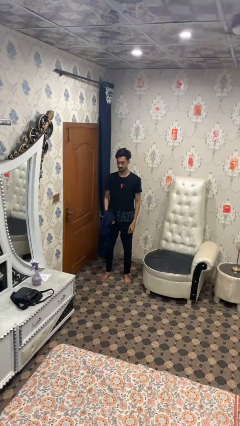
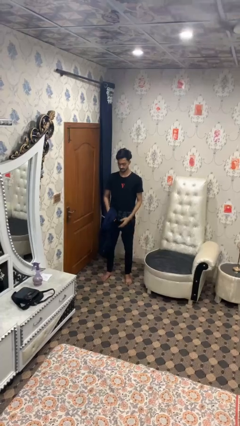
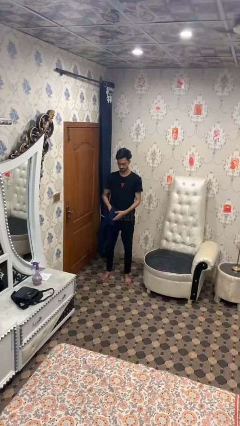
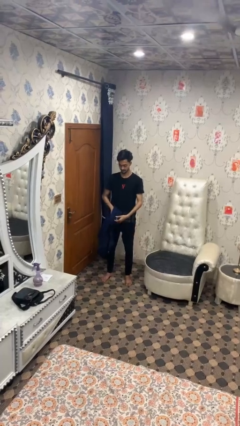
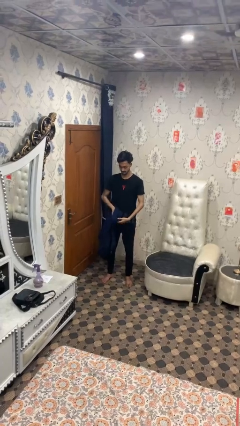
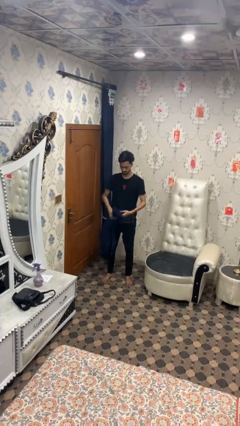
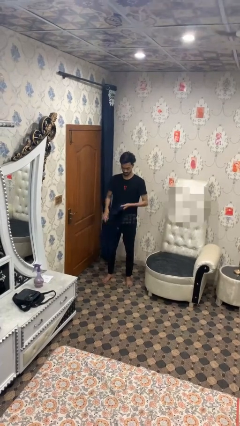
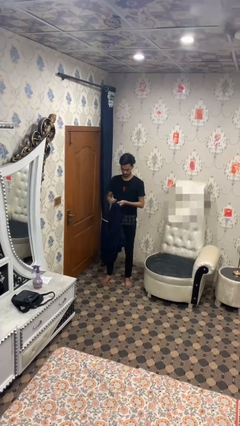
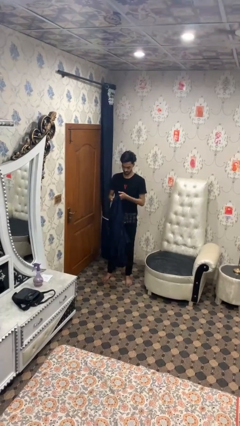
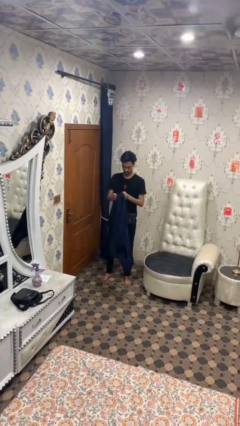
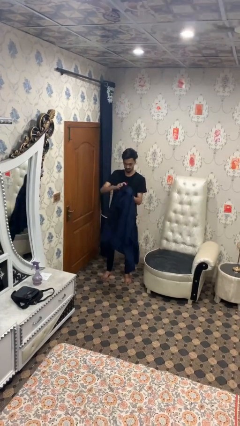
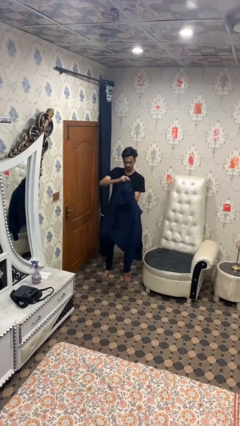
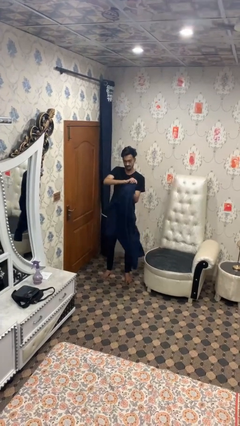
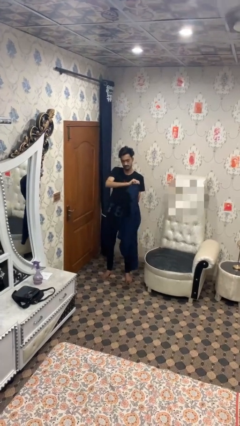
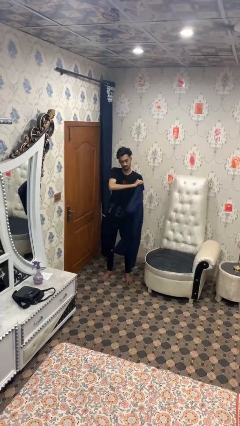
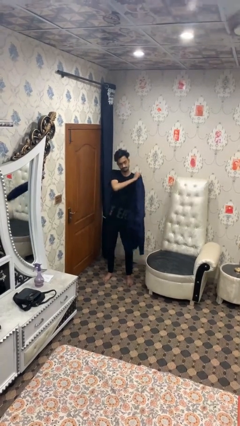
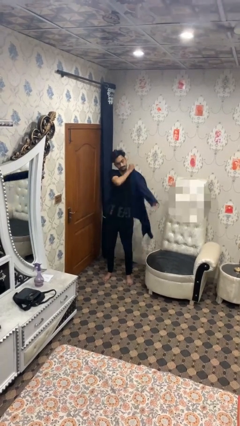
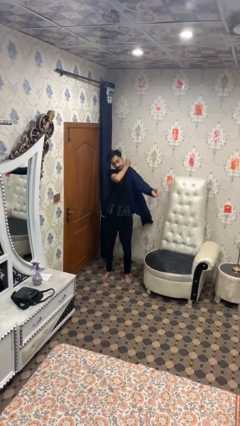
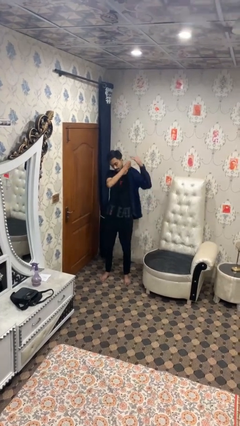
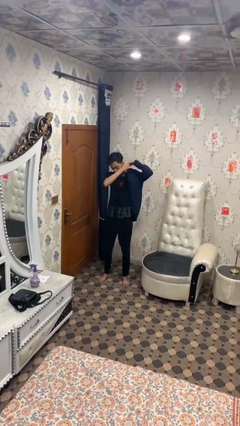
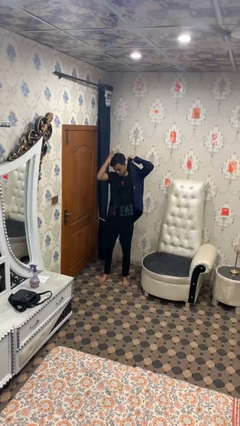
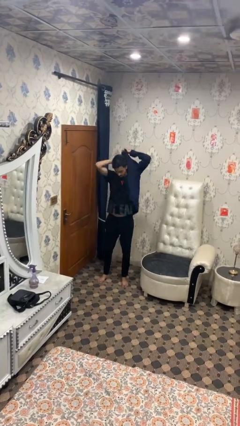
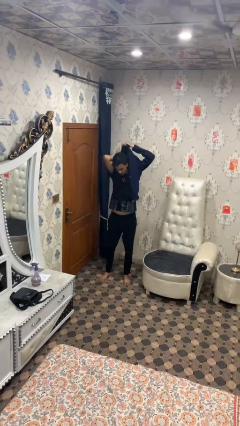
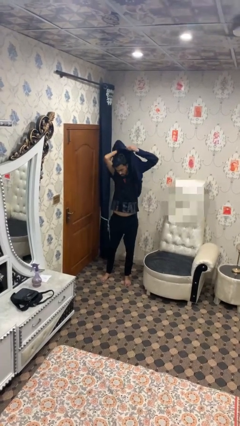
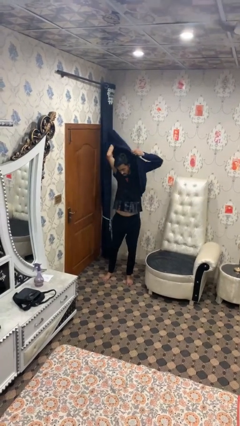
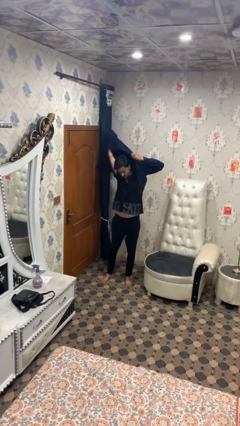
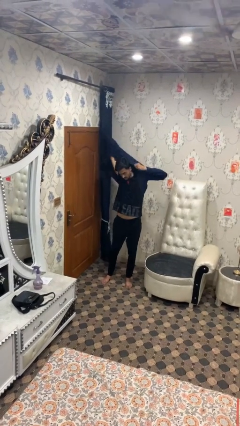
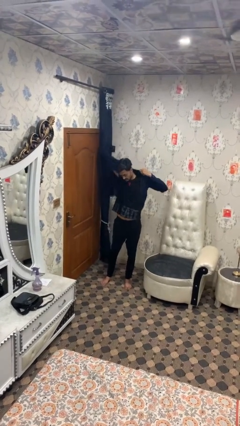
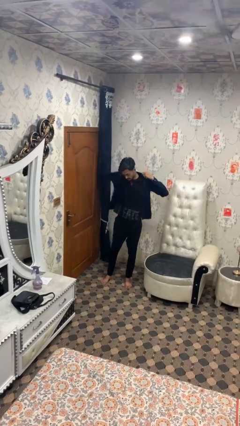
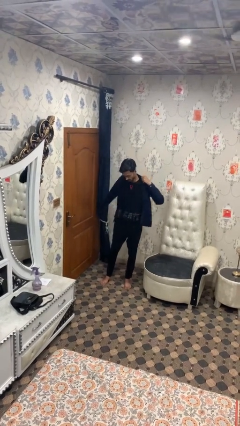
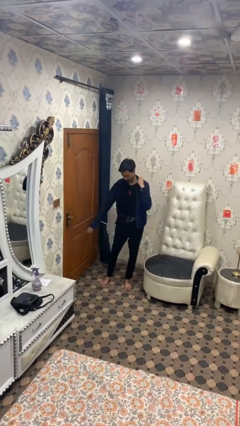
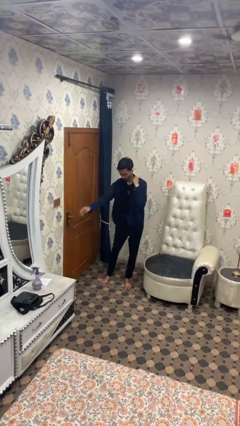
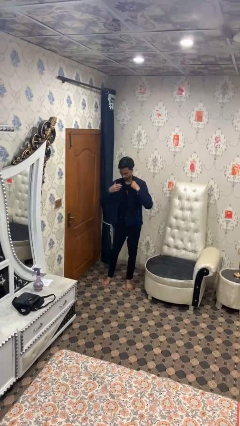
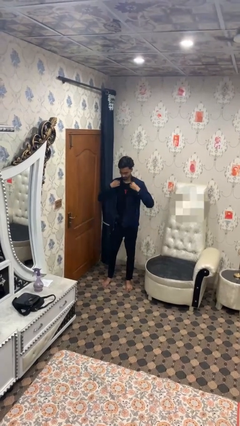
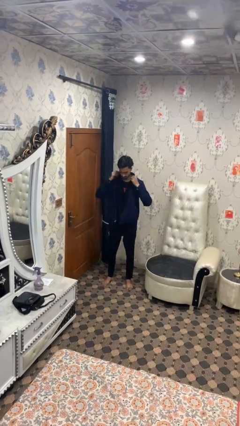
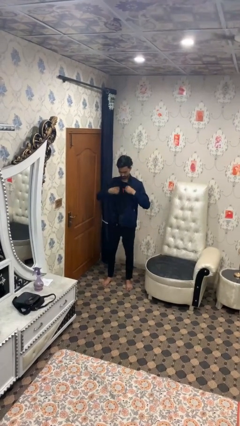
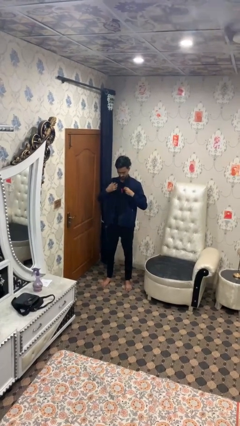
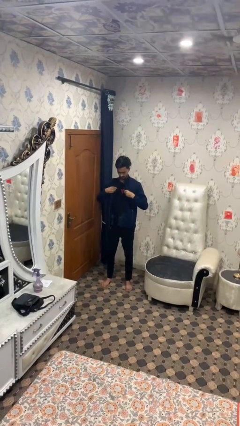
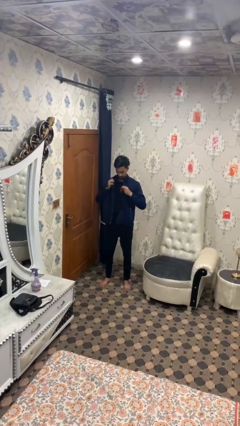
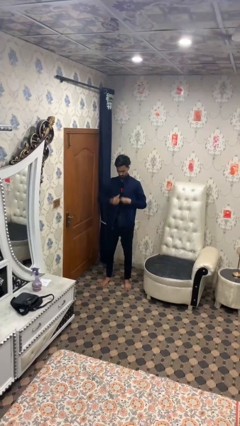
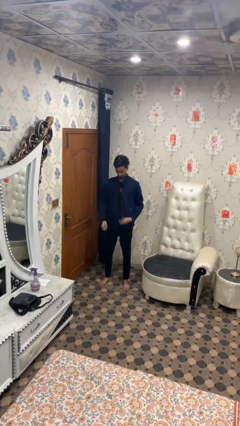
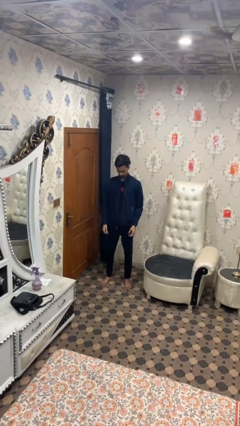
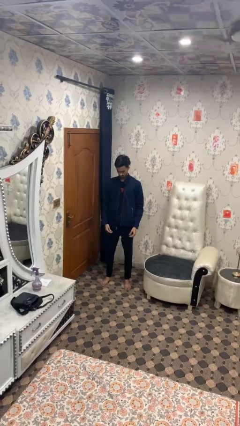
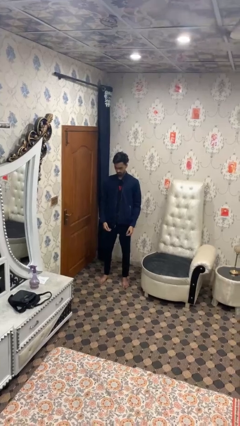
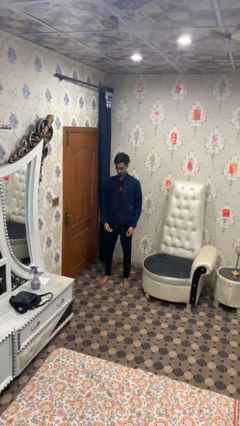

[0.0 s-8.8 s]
person puts on jacket

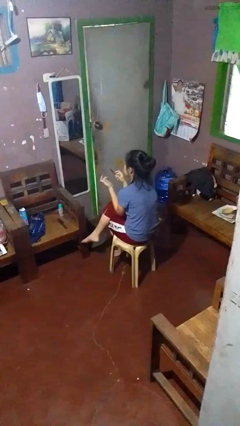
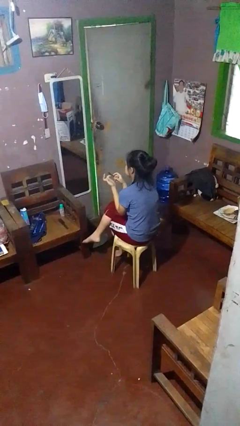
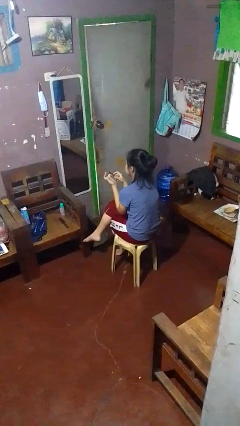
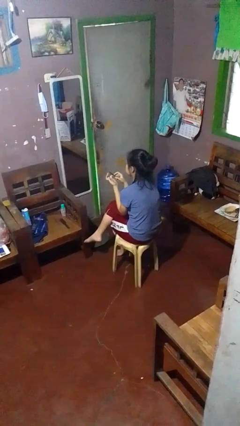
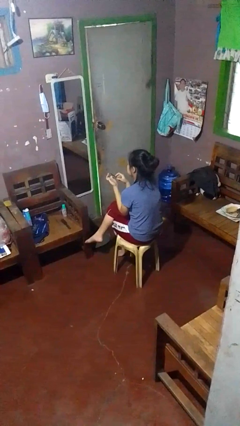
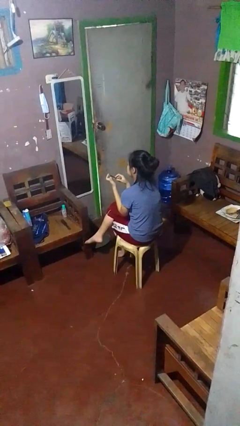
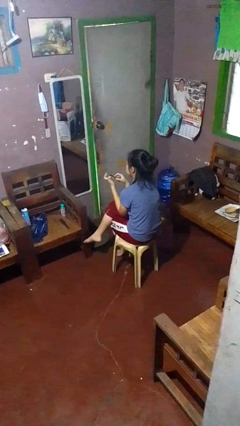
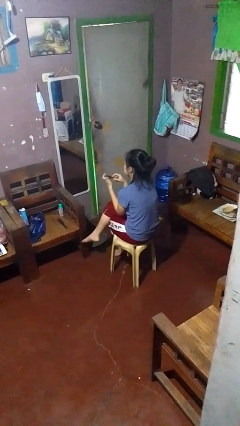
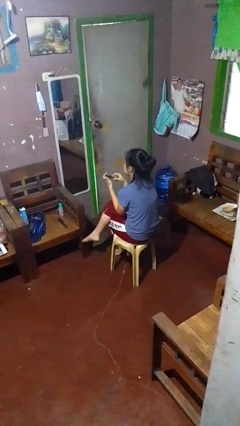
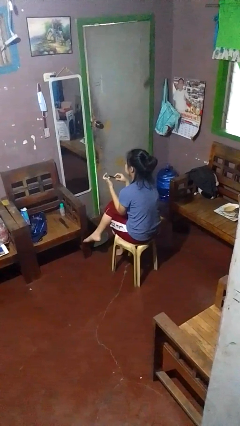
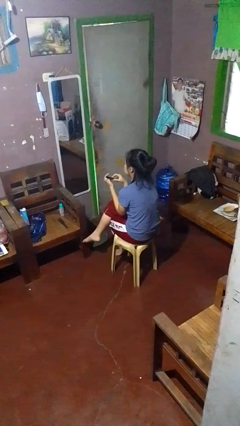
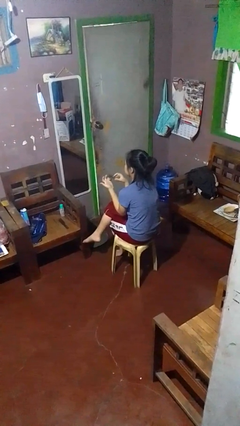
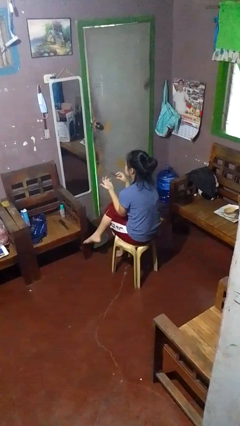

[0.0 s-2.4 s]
person files fingernails

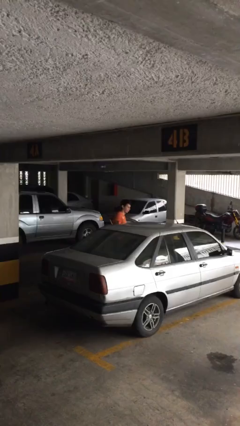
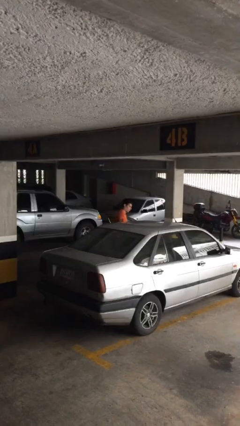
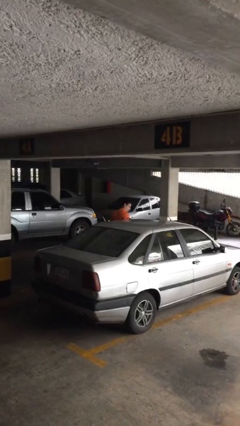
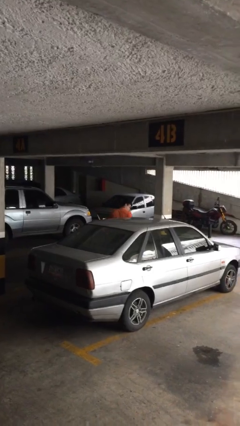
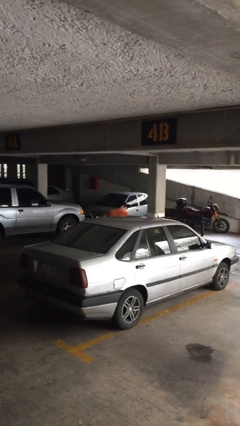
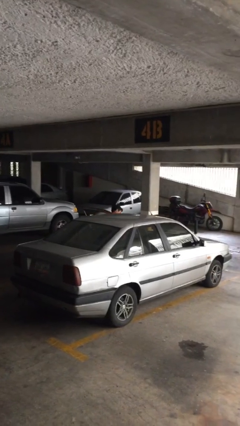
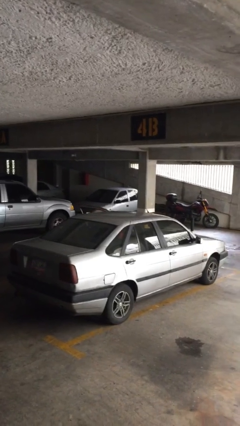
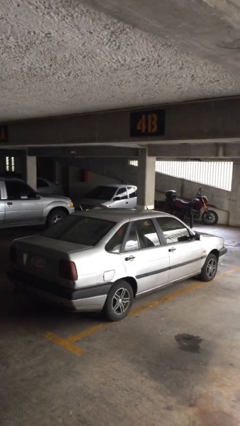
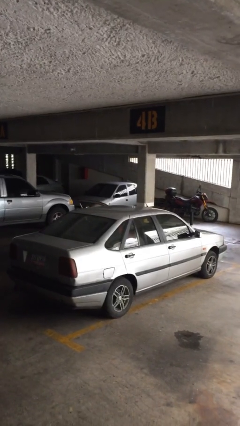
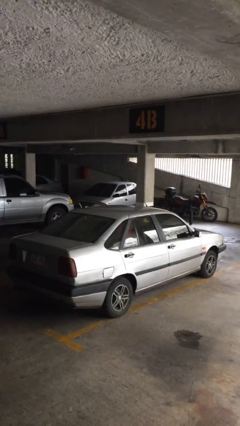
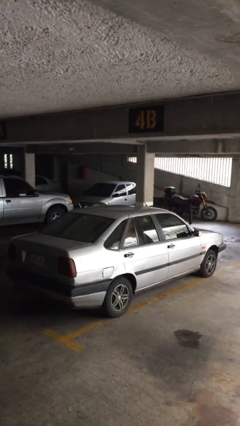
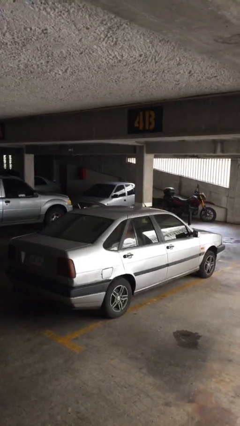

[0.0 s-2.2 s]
person enters car

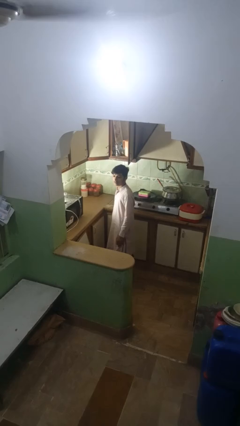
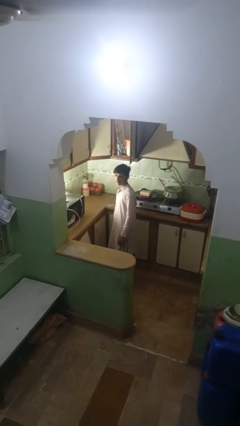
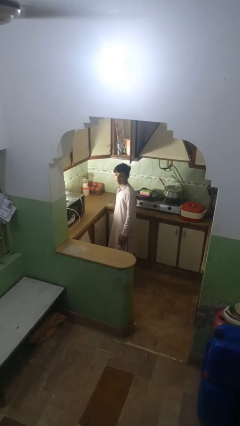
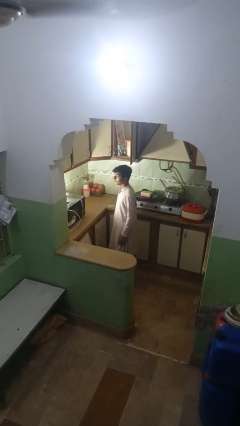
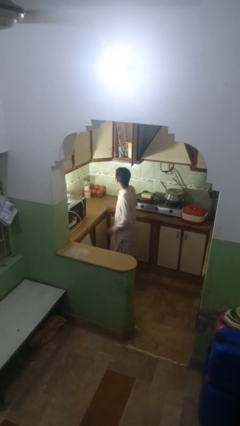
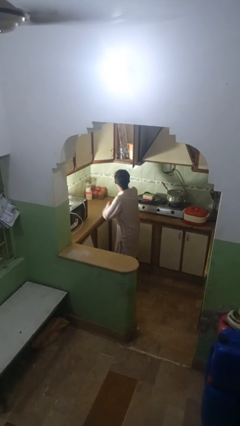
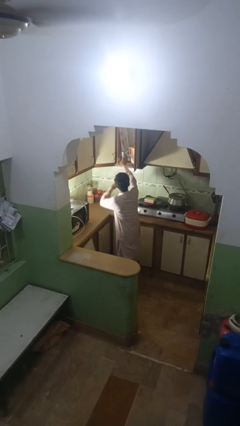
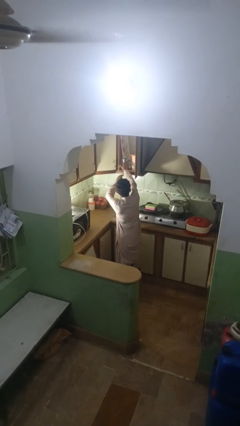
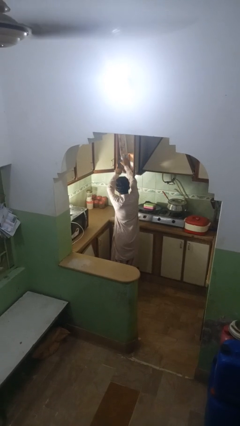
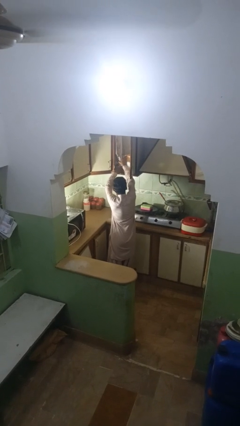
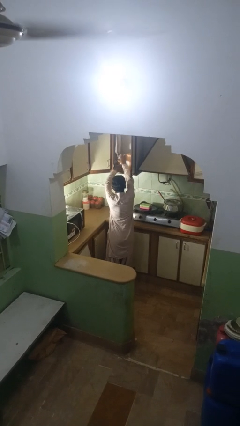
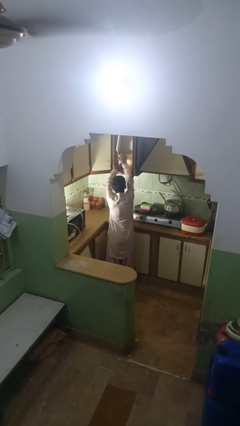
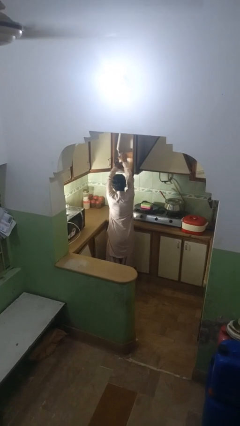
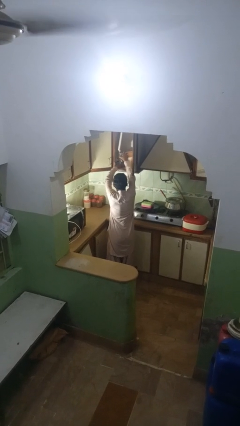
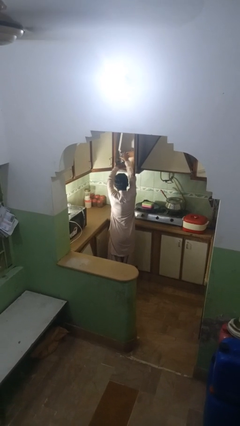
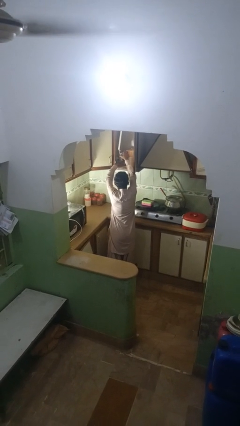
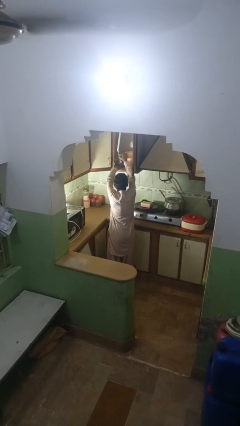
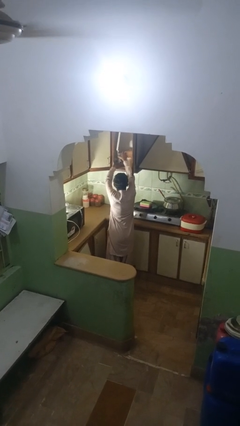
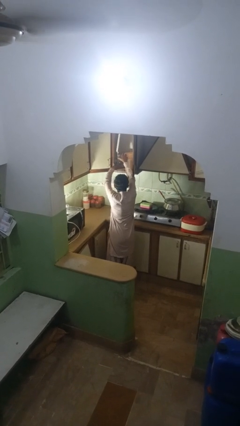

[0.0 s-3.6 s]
person searches in kitchen drawer

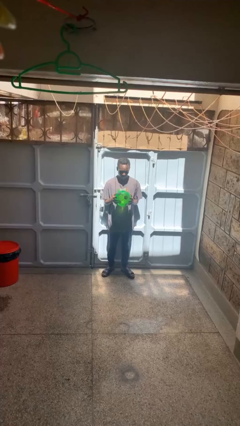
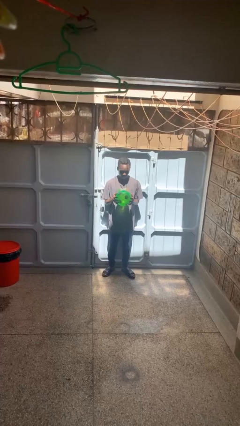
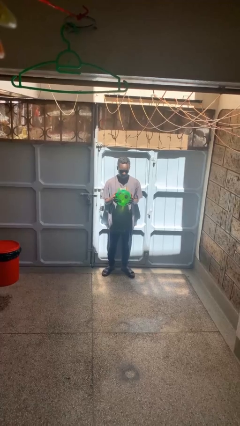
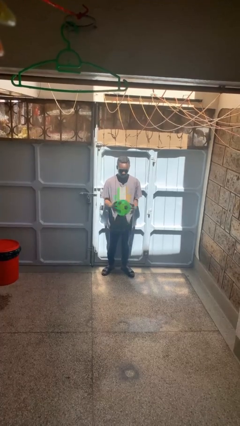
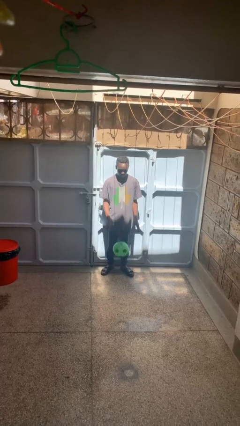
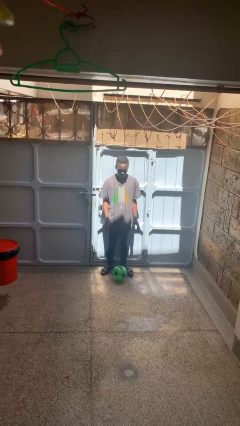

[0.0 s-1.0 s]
person bounces ball on floor
